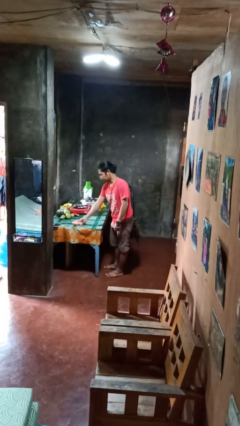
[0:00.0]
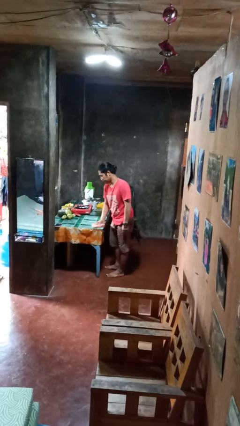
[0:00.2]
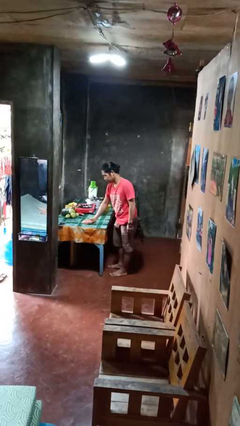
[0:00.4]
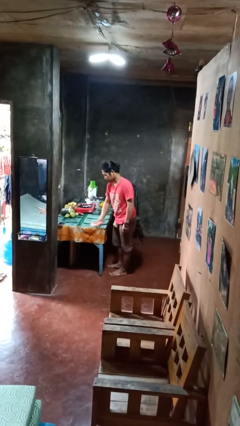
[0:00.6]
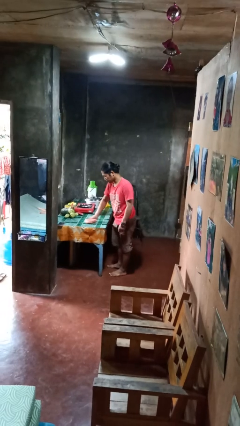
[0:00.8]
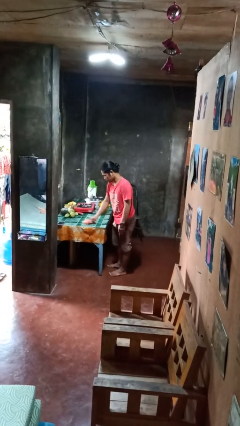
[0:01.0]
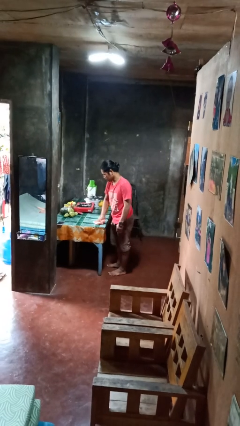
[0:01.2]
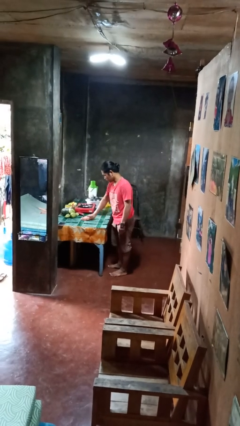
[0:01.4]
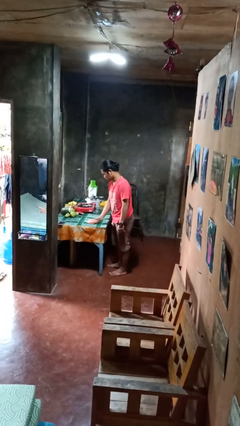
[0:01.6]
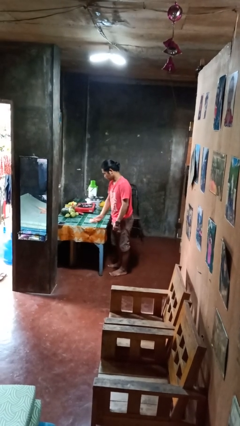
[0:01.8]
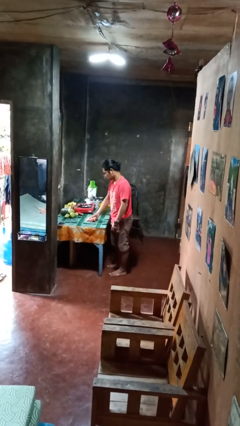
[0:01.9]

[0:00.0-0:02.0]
person cleans table with rag

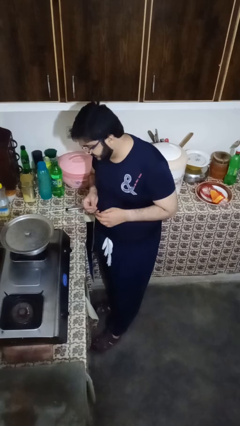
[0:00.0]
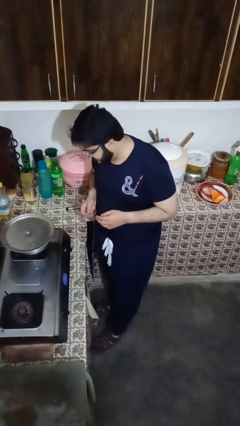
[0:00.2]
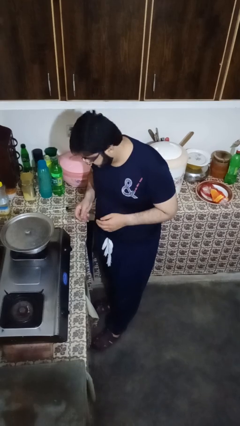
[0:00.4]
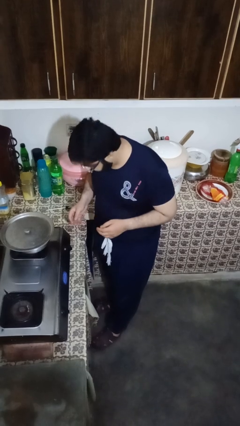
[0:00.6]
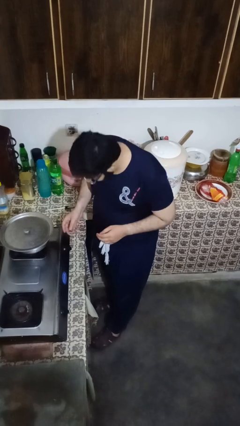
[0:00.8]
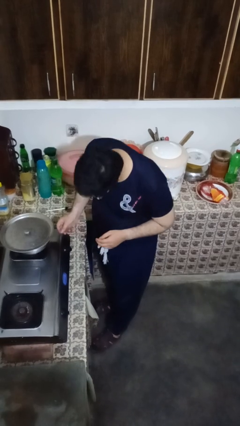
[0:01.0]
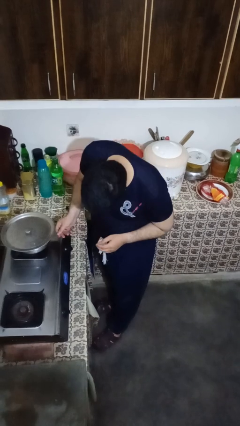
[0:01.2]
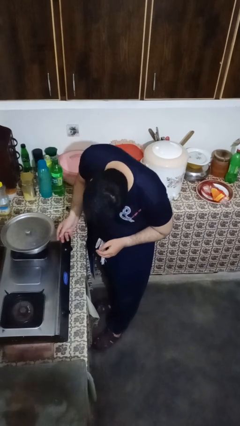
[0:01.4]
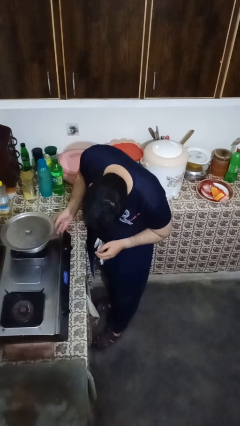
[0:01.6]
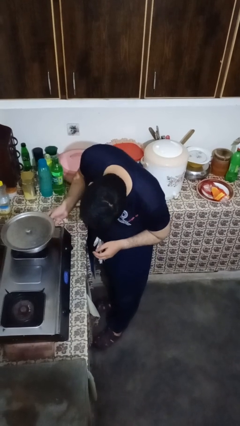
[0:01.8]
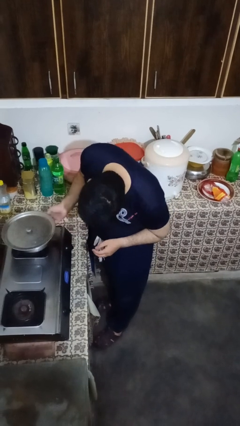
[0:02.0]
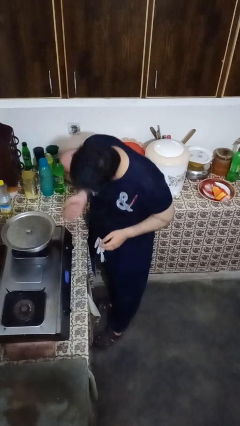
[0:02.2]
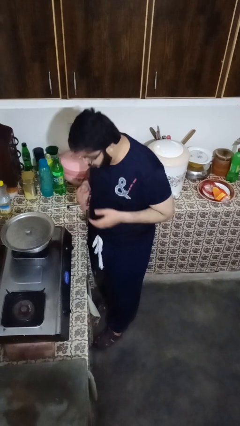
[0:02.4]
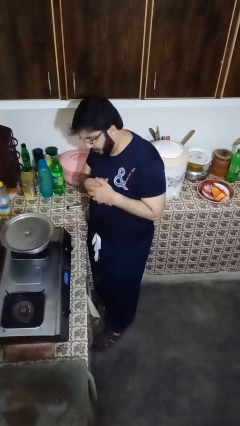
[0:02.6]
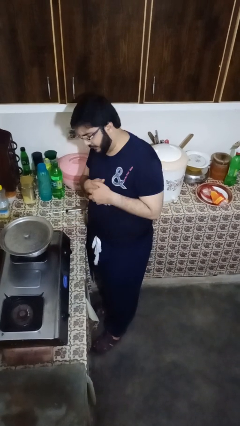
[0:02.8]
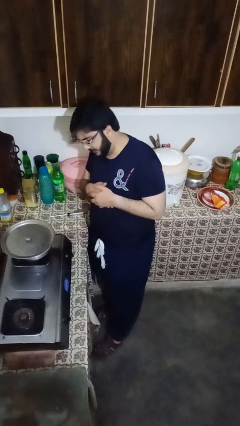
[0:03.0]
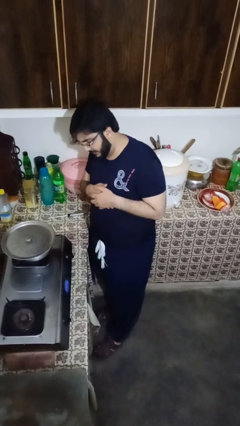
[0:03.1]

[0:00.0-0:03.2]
person burns hand

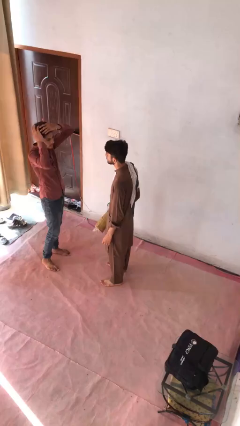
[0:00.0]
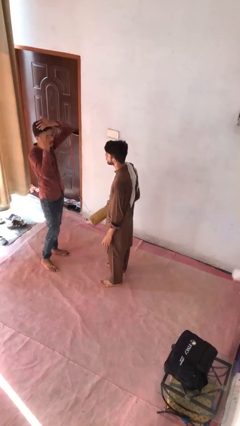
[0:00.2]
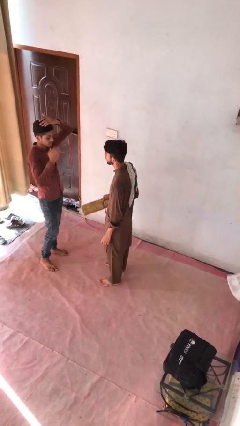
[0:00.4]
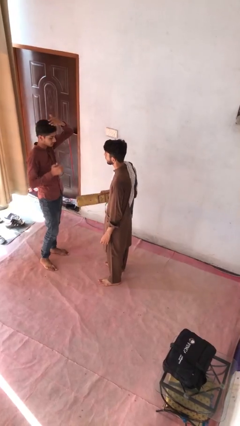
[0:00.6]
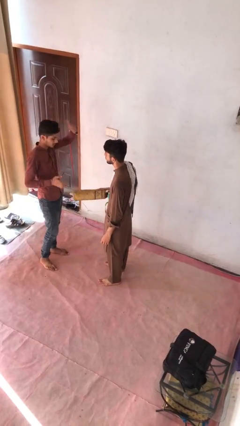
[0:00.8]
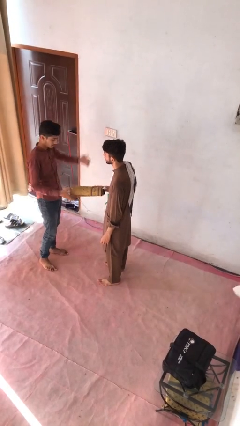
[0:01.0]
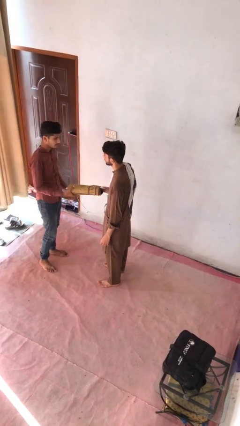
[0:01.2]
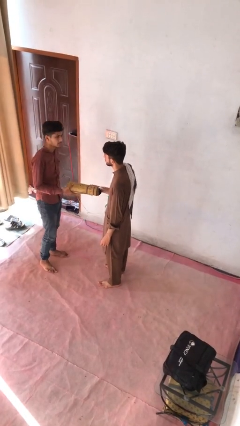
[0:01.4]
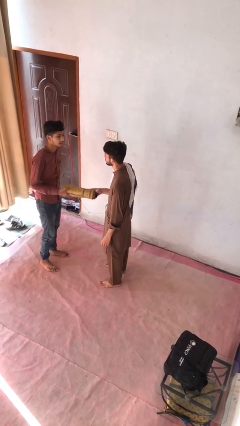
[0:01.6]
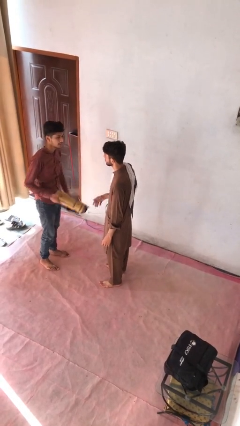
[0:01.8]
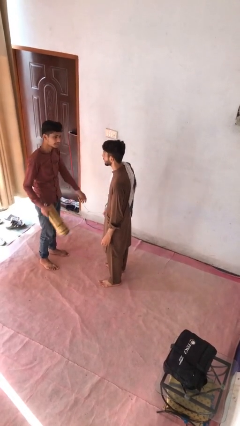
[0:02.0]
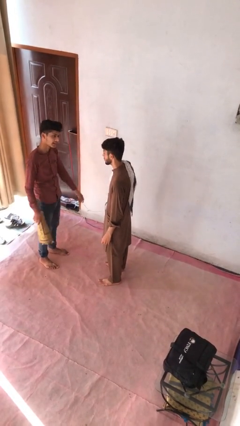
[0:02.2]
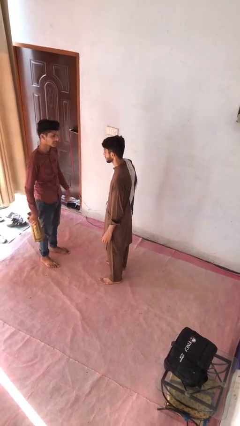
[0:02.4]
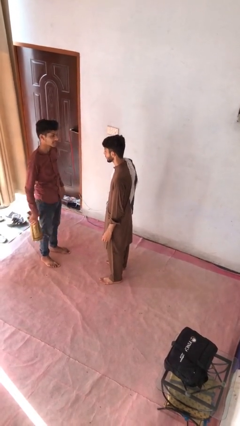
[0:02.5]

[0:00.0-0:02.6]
person transfers object to person

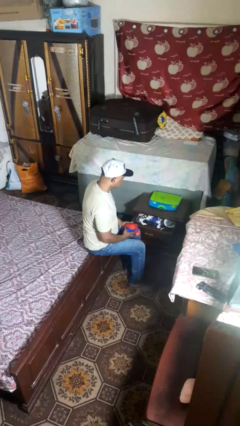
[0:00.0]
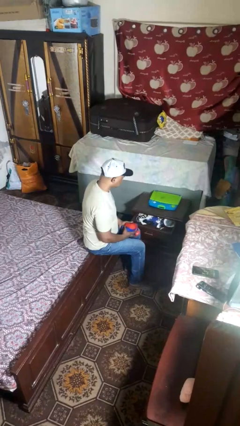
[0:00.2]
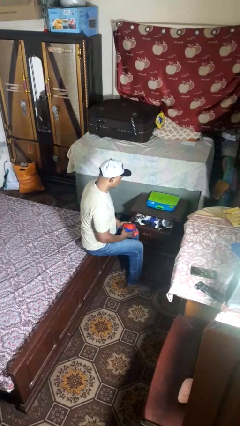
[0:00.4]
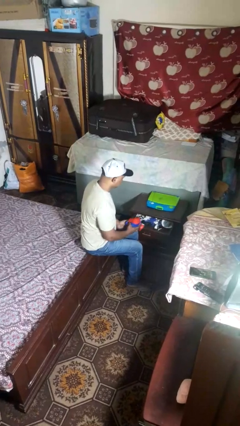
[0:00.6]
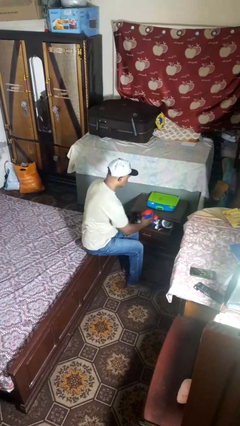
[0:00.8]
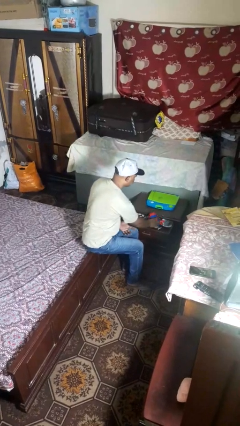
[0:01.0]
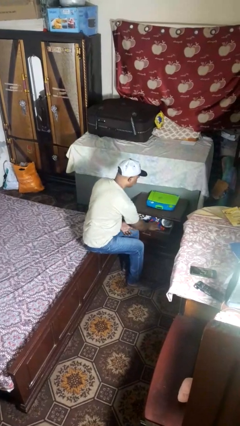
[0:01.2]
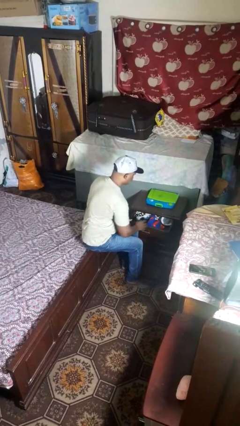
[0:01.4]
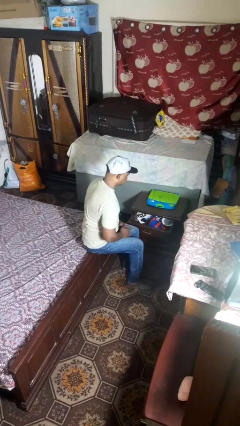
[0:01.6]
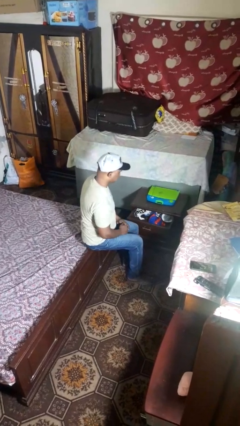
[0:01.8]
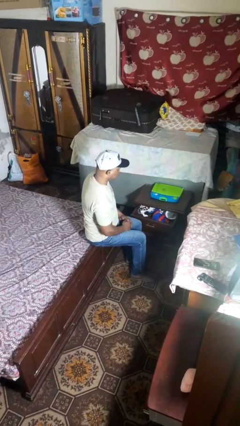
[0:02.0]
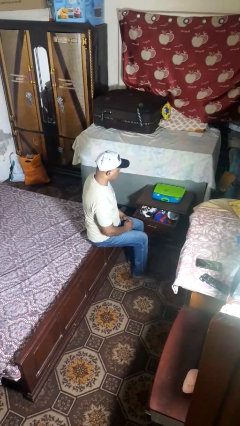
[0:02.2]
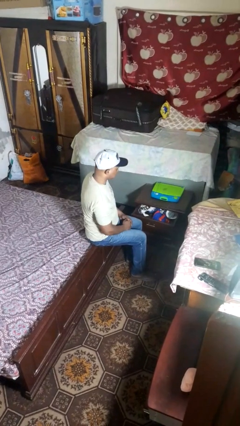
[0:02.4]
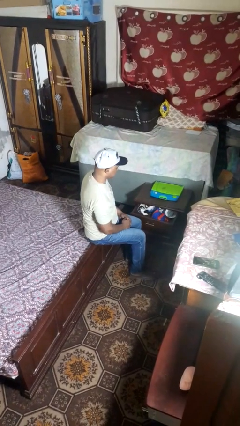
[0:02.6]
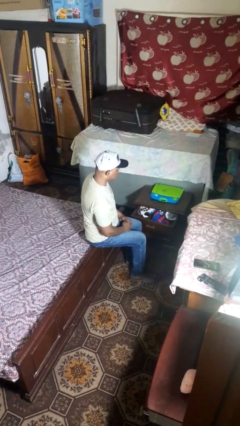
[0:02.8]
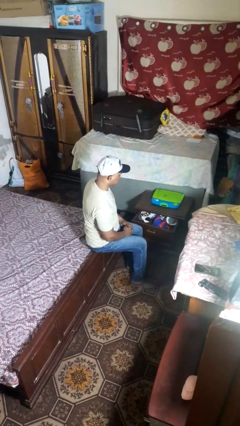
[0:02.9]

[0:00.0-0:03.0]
person puts clothes into dresser

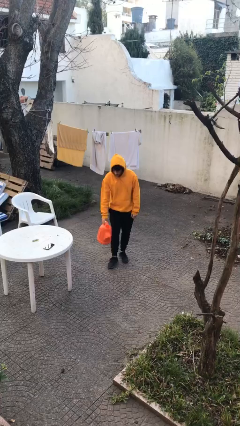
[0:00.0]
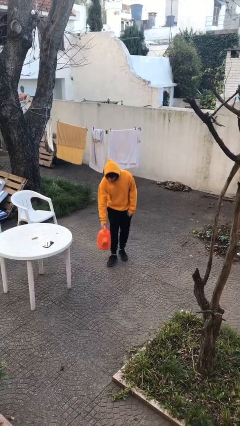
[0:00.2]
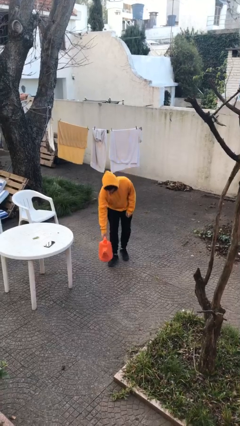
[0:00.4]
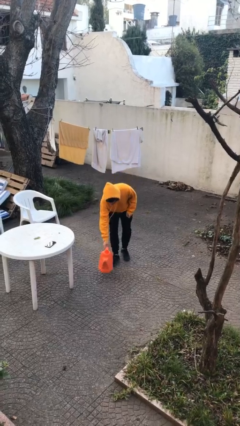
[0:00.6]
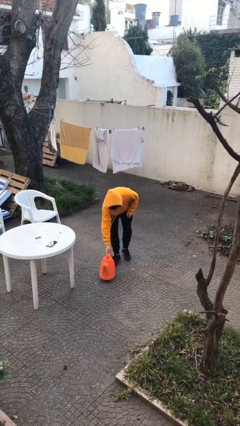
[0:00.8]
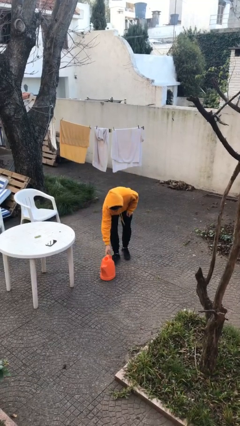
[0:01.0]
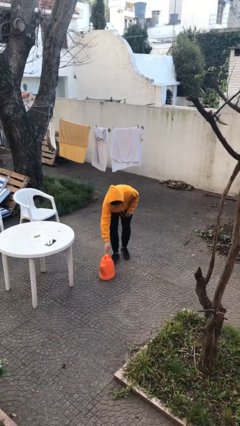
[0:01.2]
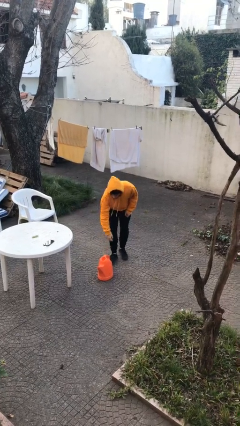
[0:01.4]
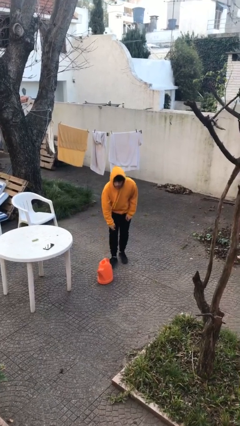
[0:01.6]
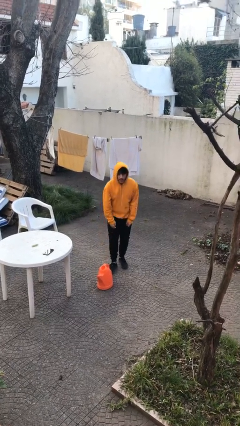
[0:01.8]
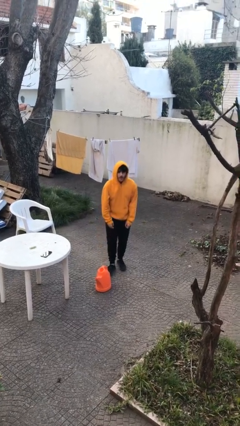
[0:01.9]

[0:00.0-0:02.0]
person puts down object on floor

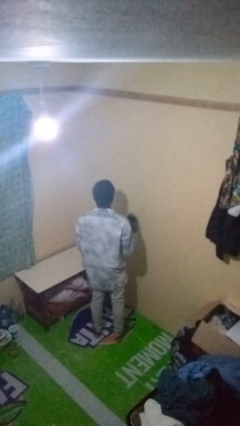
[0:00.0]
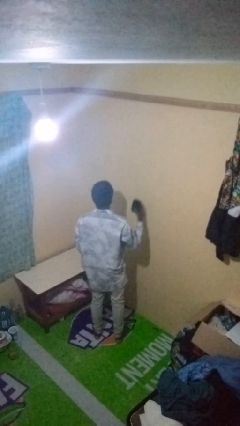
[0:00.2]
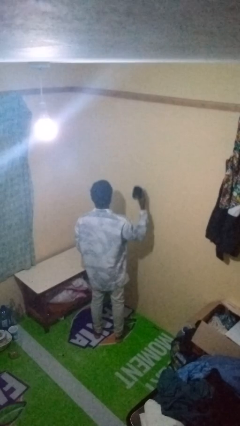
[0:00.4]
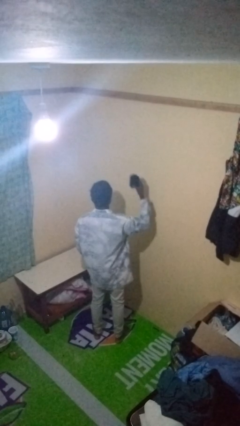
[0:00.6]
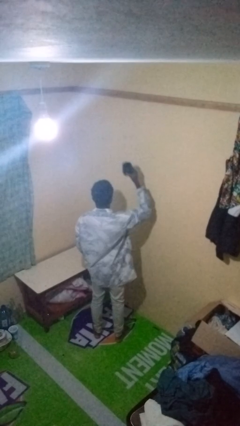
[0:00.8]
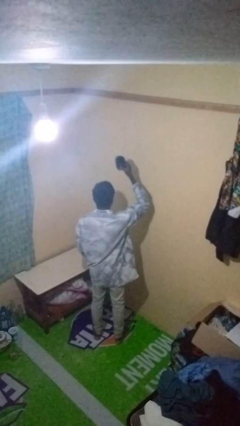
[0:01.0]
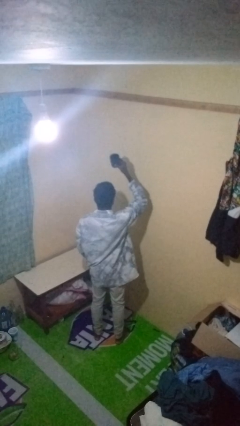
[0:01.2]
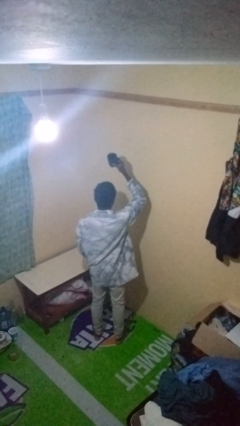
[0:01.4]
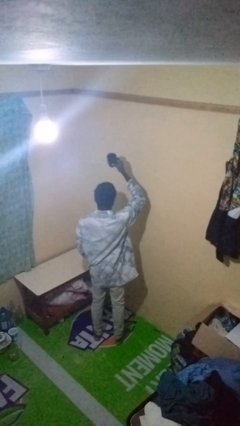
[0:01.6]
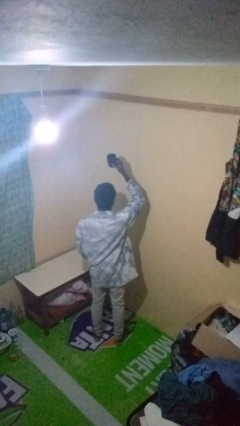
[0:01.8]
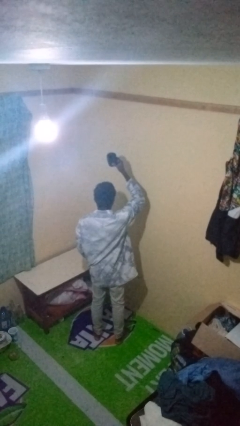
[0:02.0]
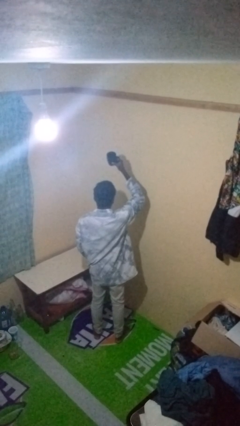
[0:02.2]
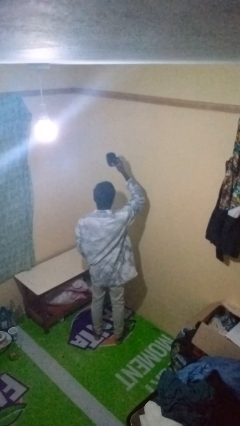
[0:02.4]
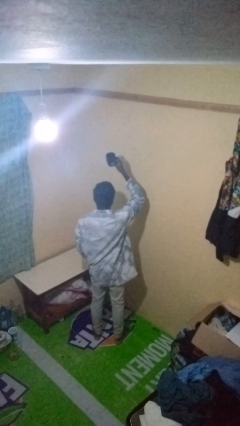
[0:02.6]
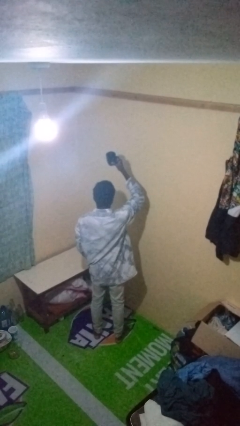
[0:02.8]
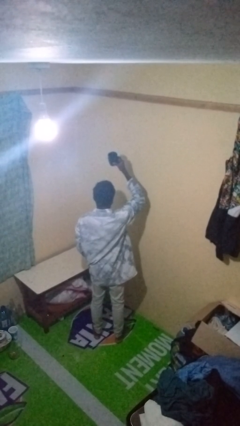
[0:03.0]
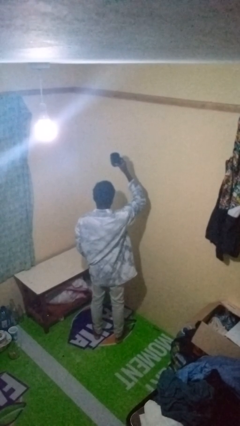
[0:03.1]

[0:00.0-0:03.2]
person holds object above head

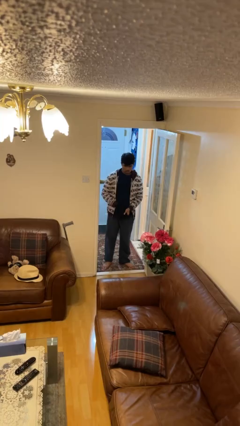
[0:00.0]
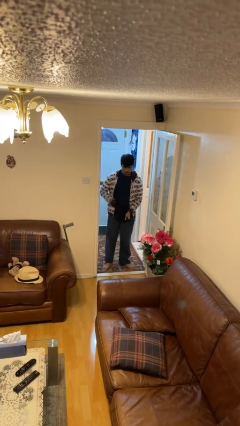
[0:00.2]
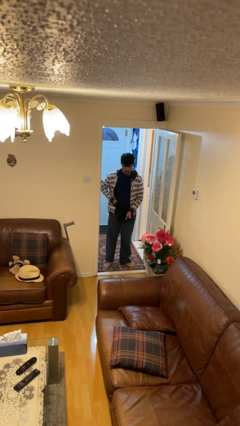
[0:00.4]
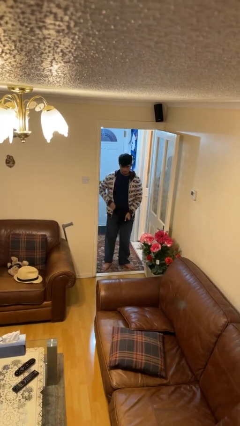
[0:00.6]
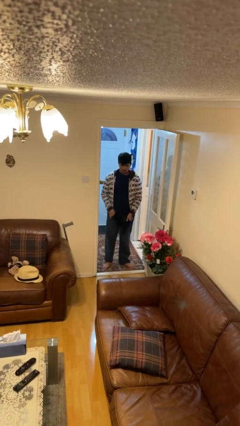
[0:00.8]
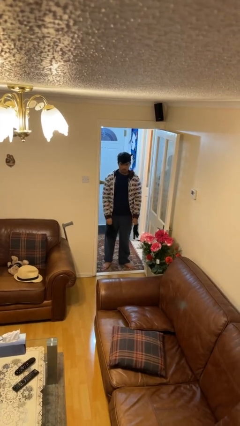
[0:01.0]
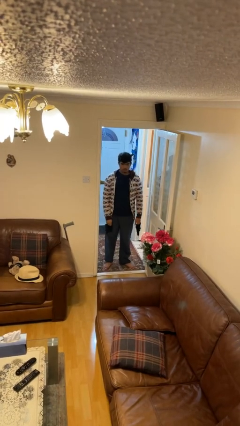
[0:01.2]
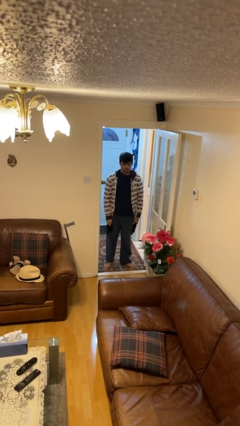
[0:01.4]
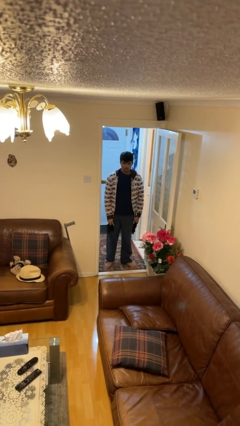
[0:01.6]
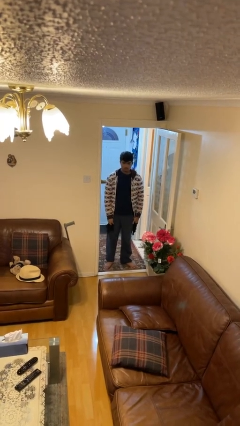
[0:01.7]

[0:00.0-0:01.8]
person takes off gloves
